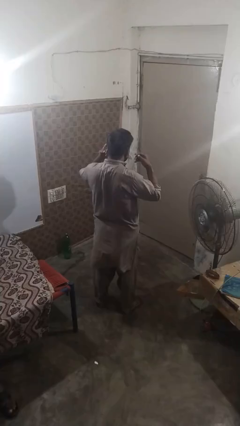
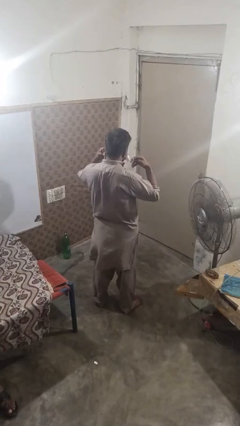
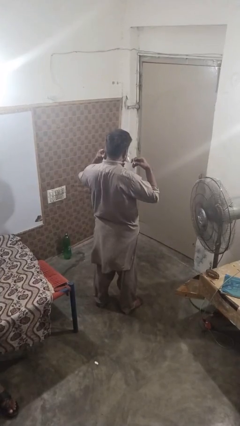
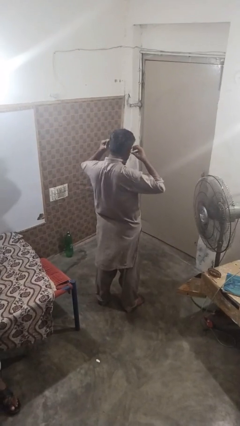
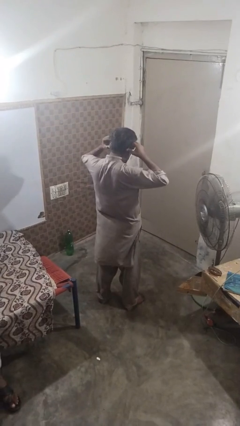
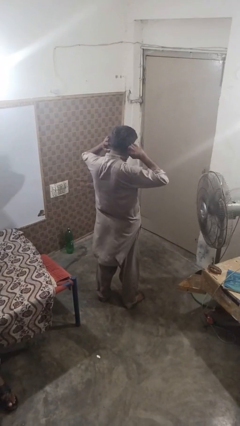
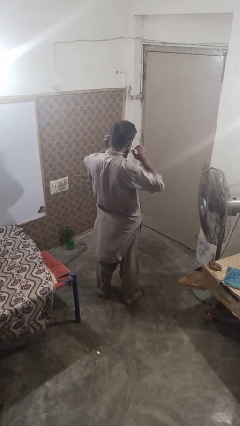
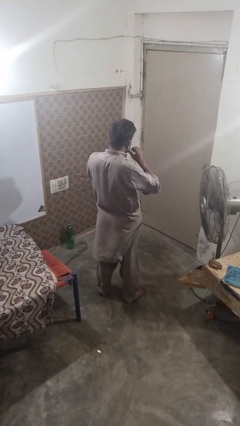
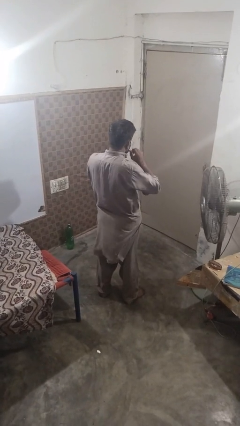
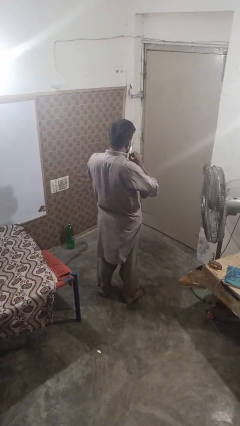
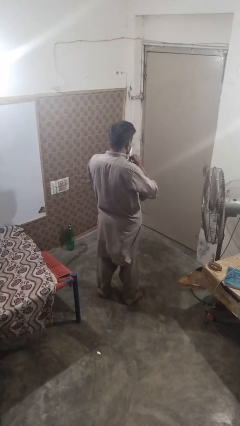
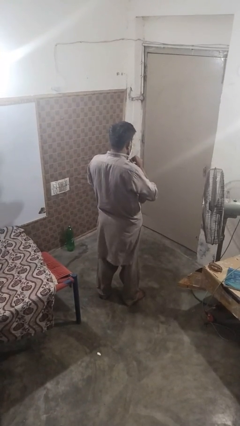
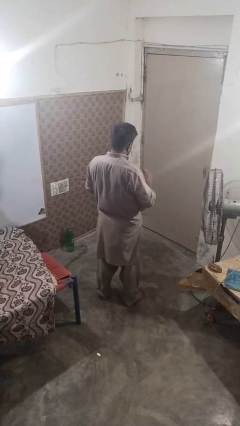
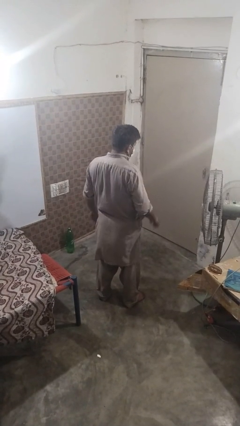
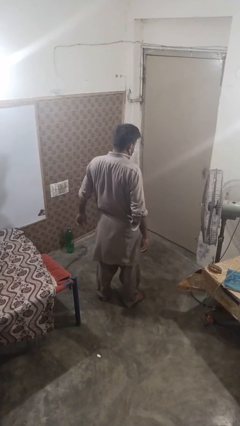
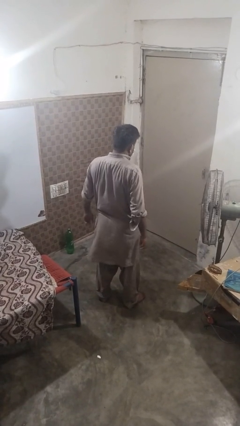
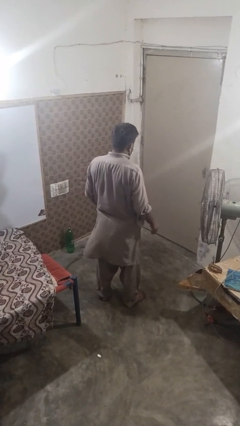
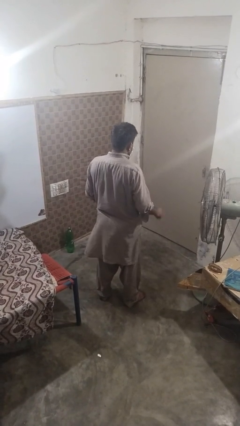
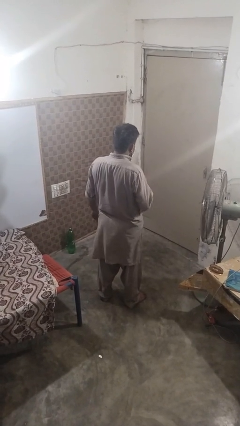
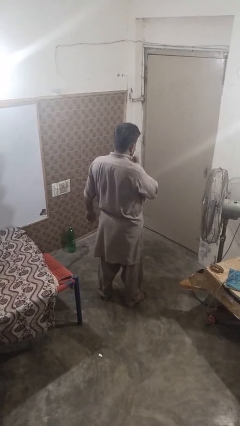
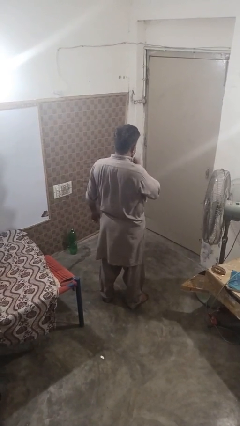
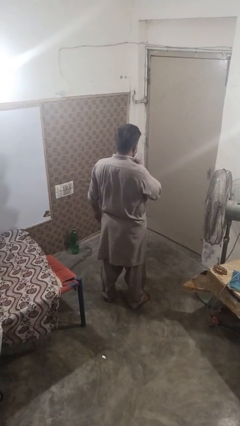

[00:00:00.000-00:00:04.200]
person puts on facemask

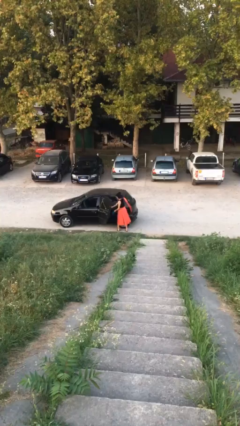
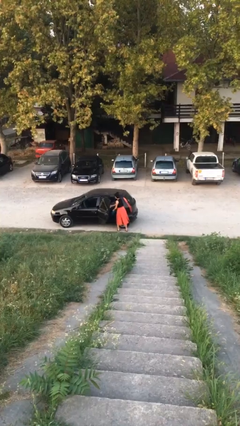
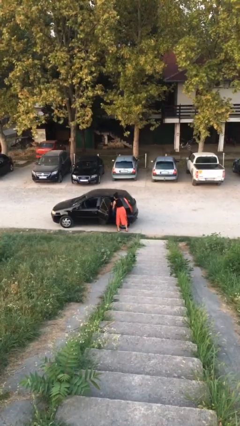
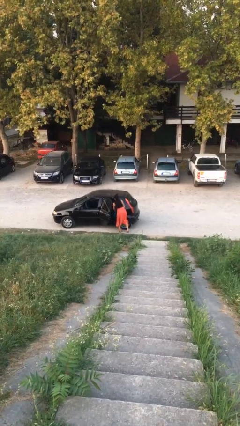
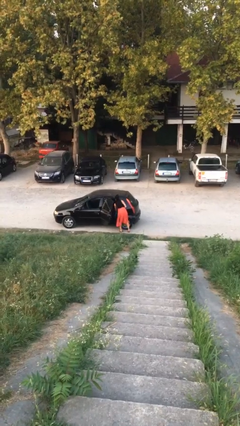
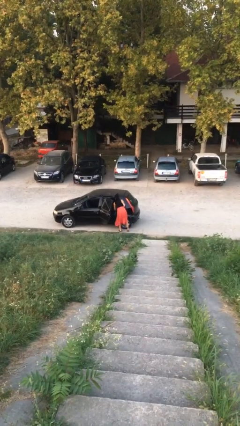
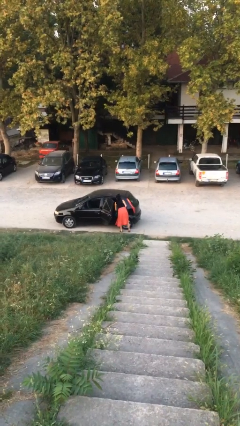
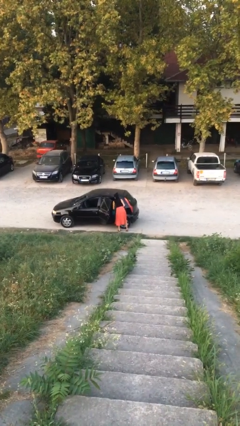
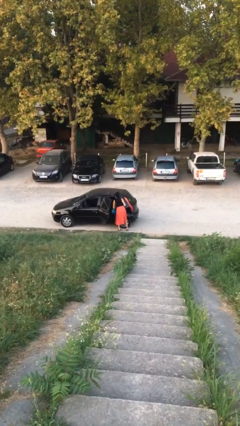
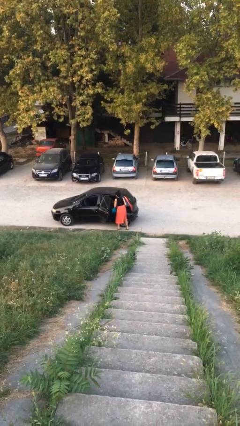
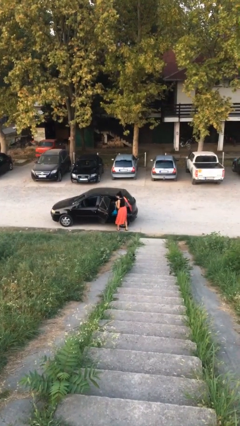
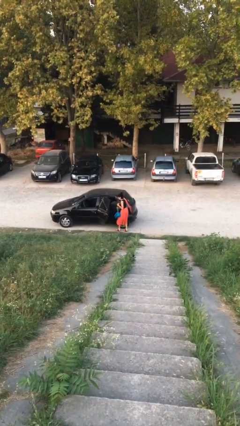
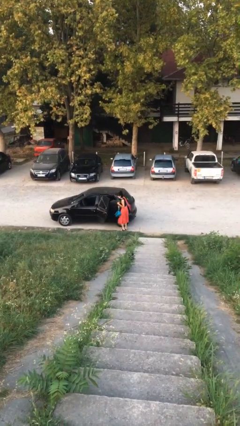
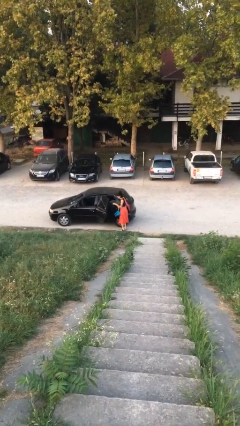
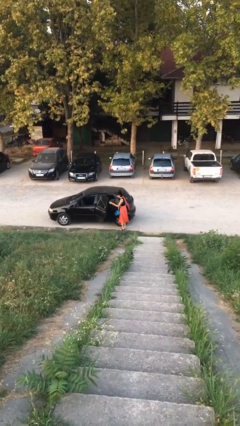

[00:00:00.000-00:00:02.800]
person unloads car

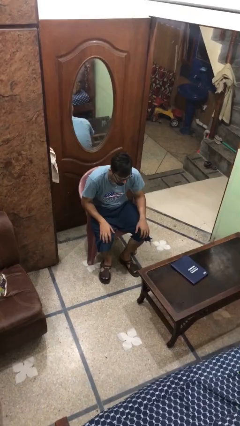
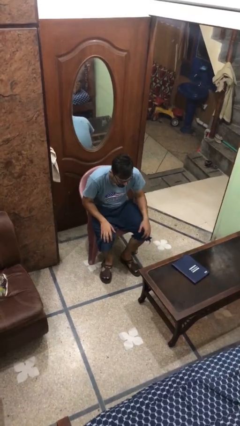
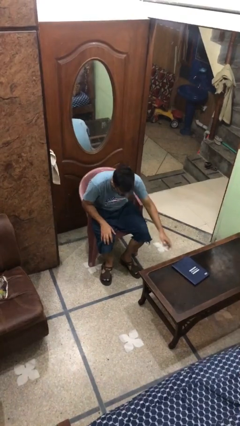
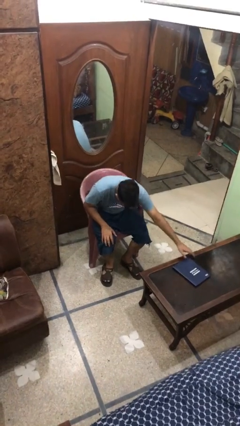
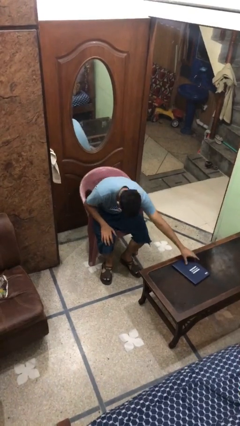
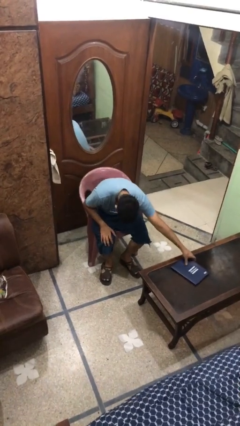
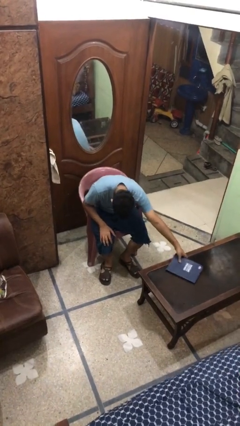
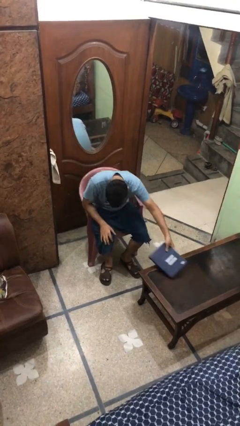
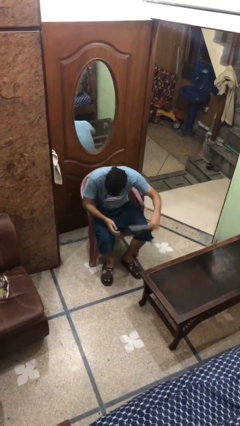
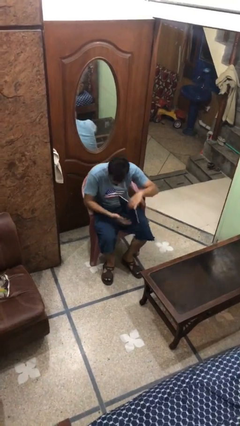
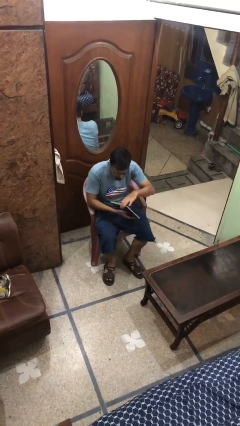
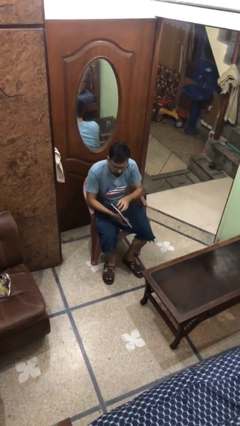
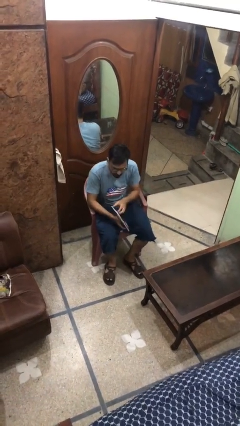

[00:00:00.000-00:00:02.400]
person picks up object from table

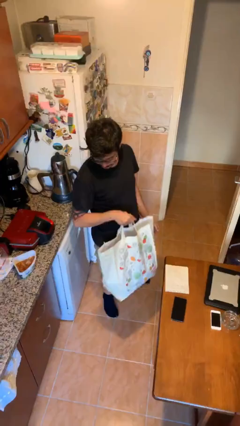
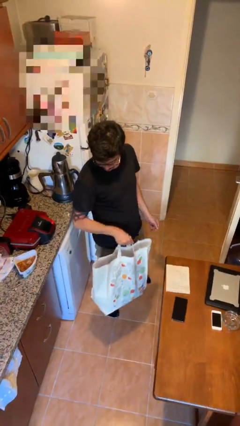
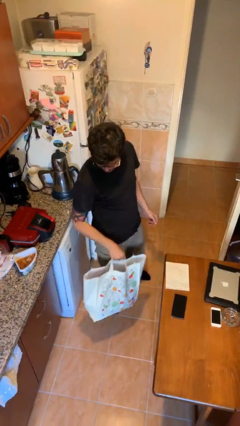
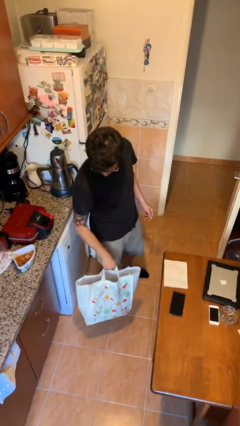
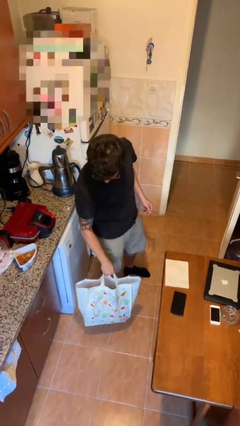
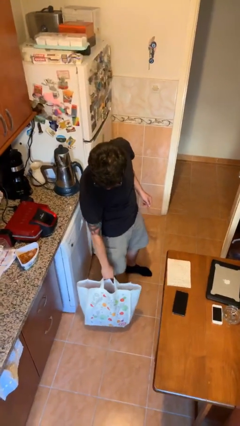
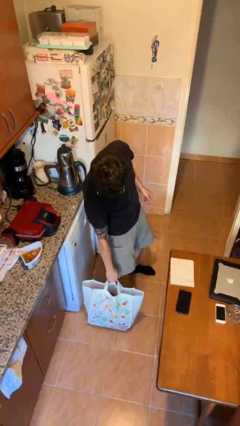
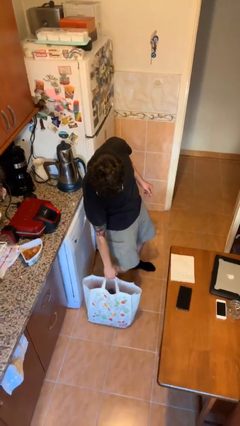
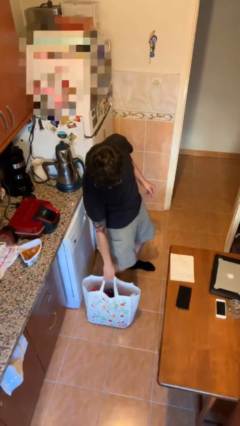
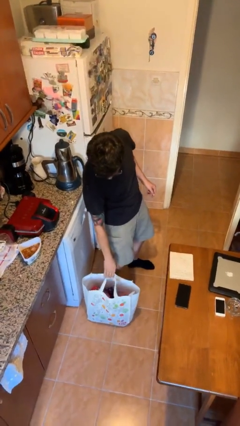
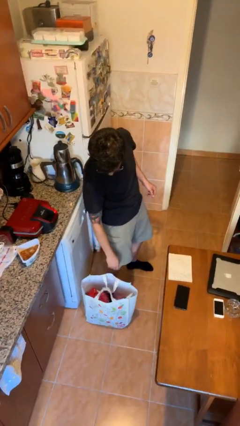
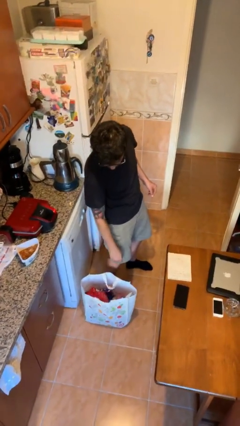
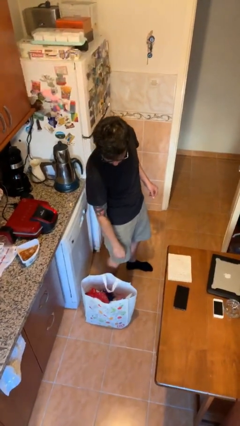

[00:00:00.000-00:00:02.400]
person puts down object on floor

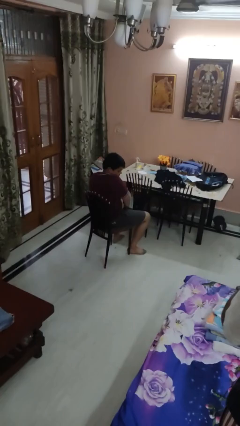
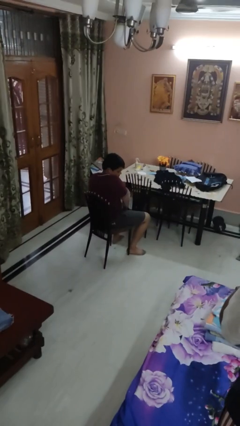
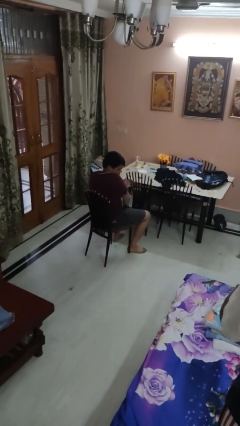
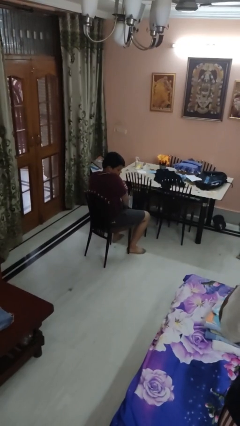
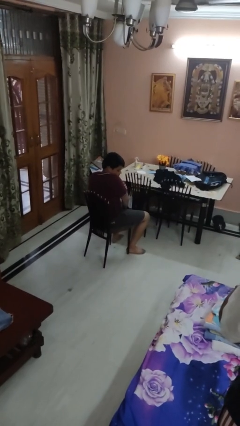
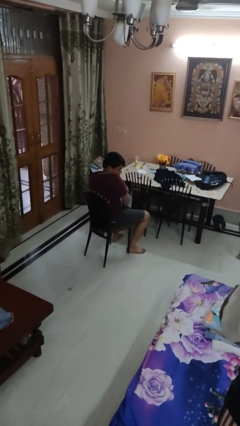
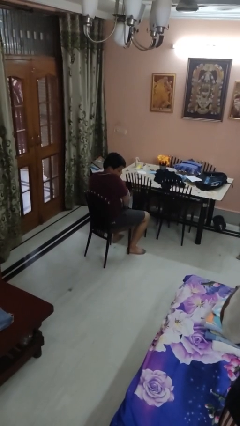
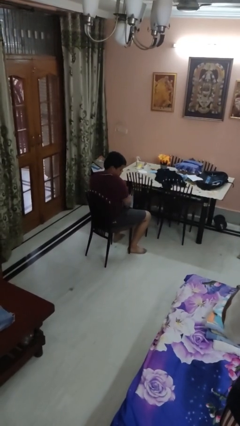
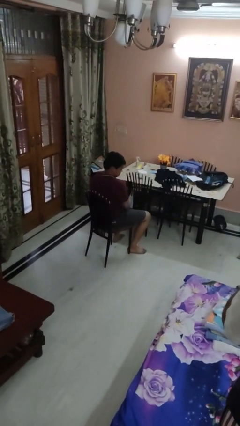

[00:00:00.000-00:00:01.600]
person swats bug

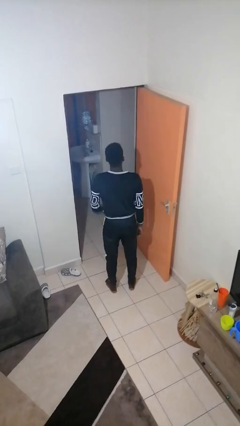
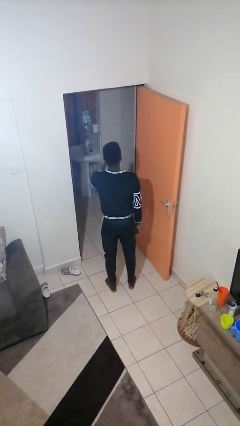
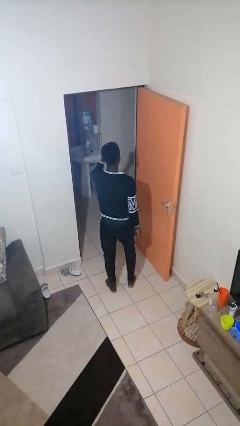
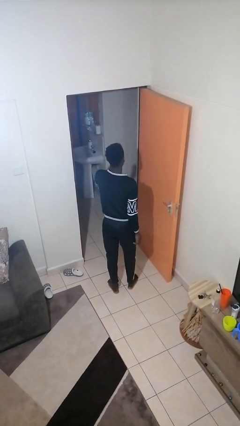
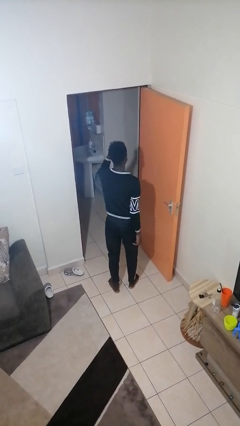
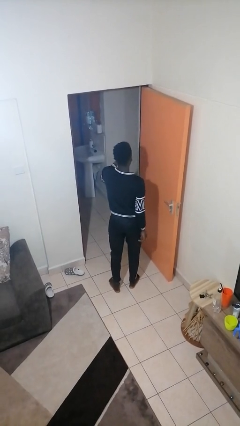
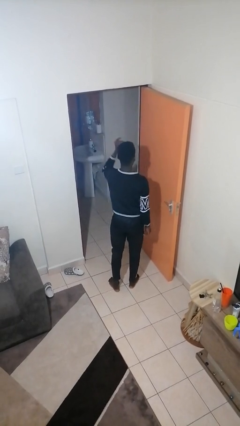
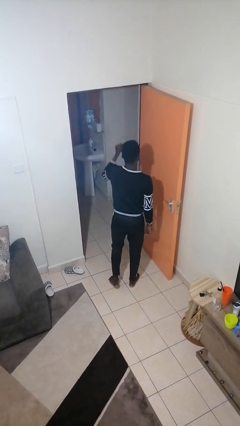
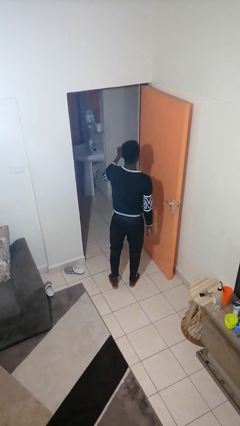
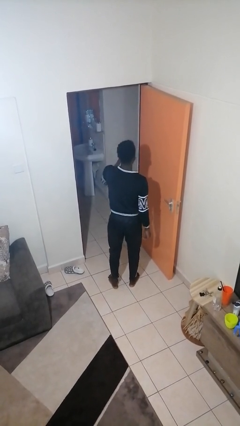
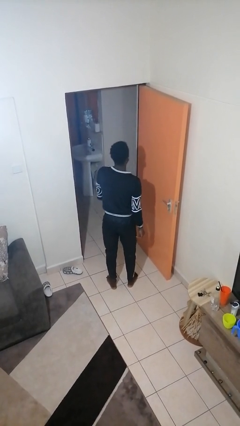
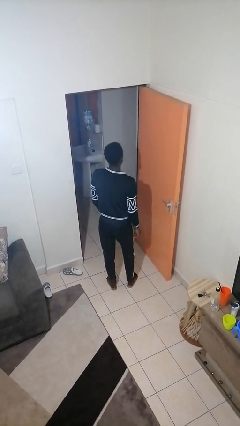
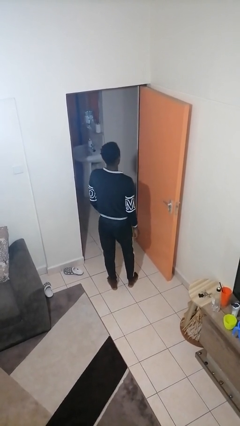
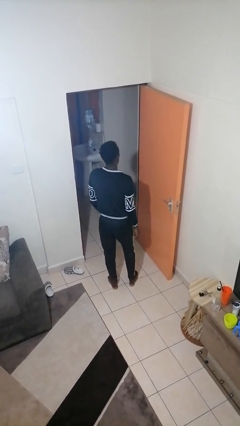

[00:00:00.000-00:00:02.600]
person snaps fingers

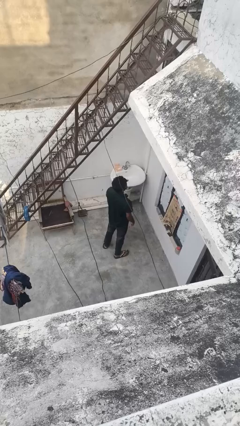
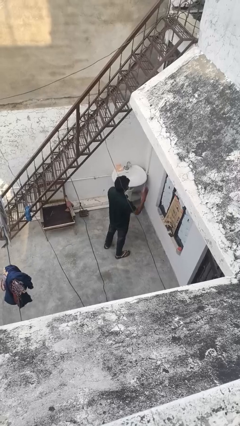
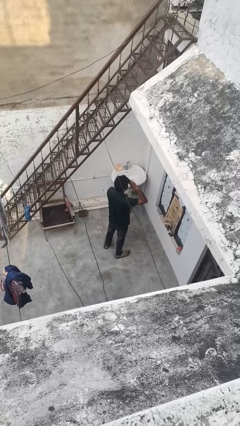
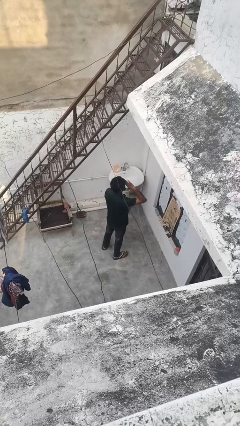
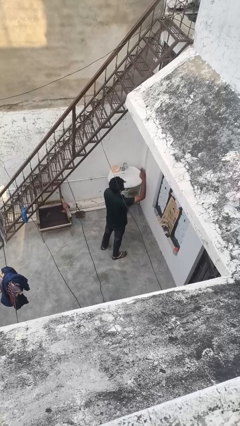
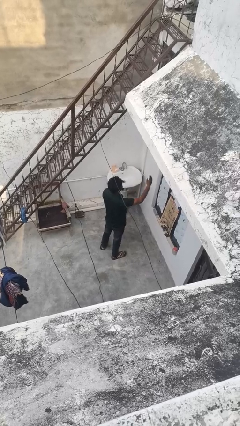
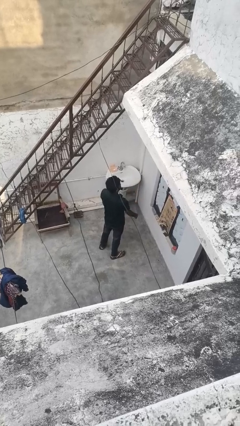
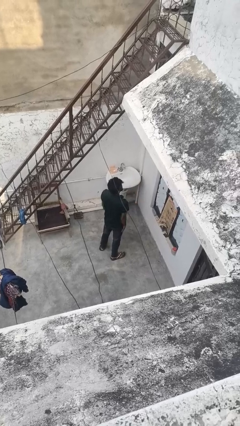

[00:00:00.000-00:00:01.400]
person salutes
